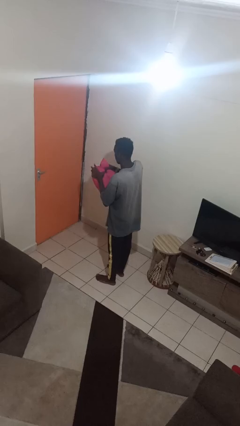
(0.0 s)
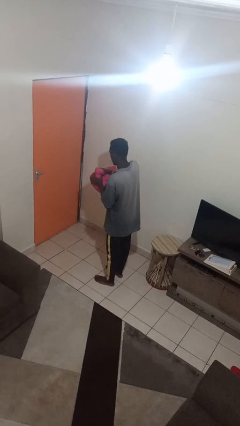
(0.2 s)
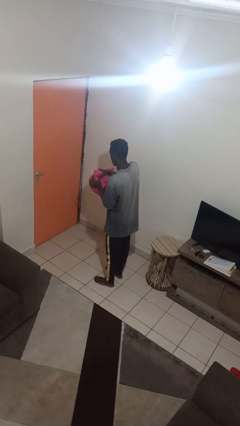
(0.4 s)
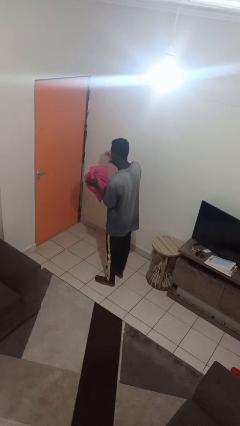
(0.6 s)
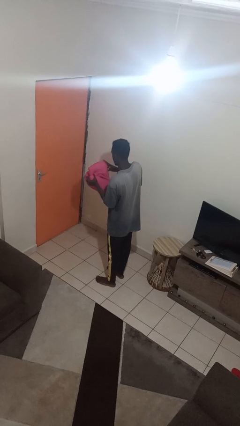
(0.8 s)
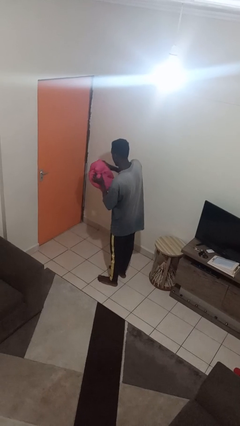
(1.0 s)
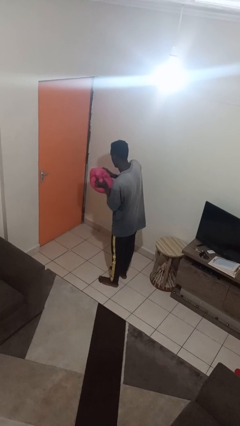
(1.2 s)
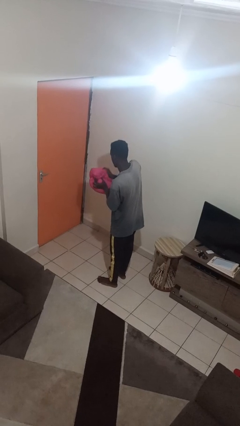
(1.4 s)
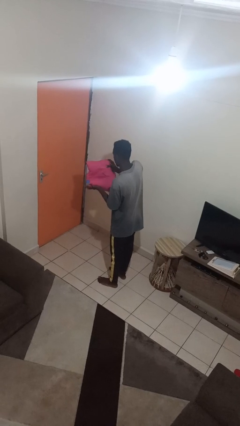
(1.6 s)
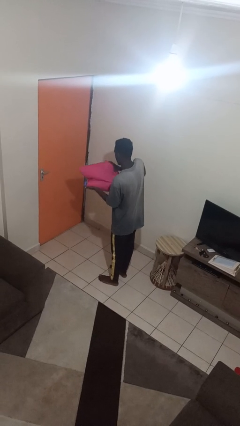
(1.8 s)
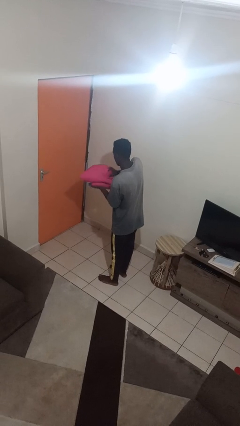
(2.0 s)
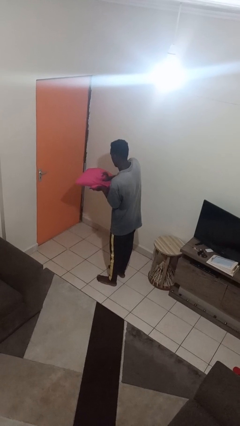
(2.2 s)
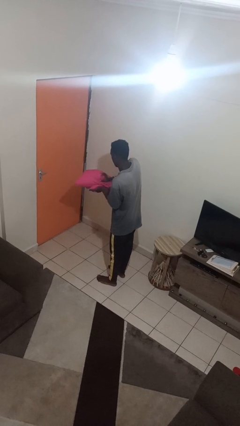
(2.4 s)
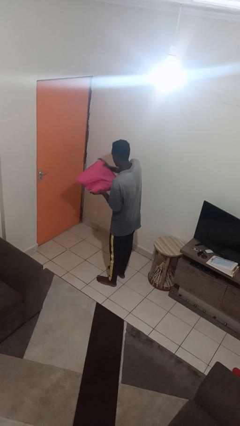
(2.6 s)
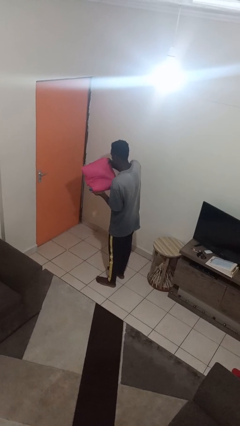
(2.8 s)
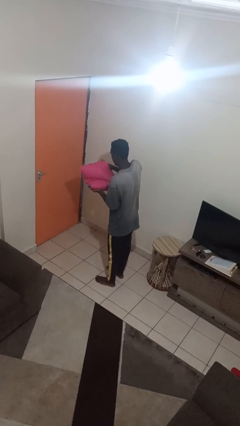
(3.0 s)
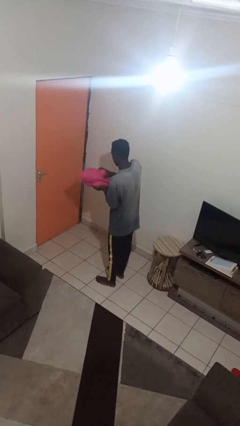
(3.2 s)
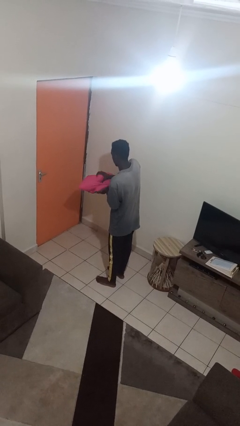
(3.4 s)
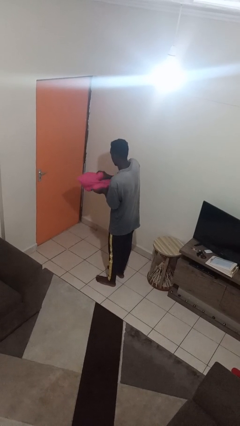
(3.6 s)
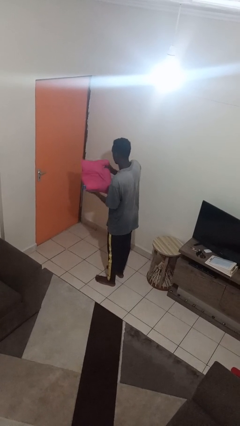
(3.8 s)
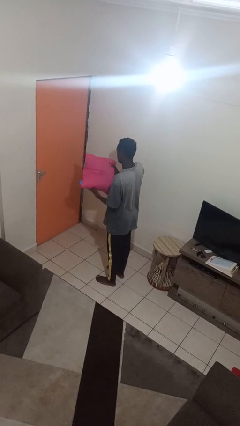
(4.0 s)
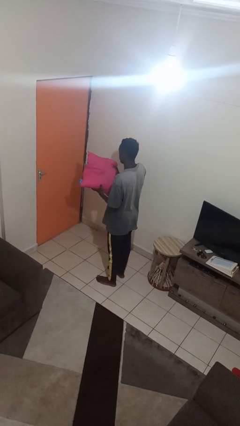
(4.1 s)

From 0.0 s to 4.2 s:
person squeezes object

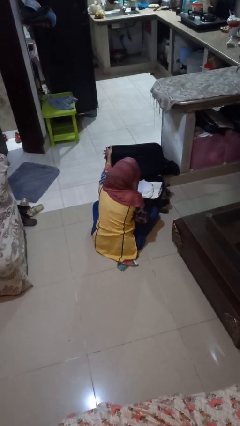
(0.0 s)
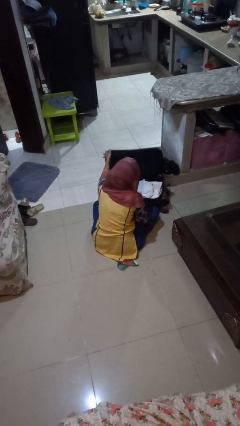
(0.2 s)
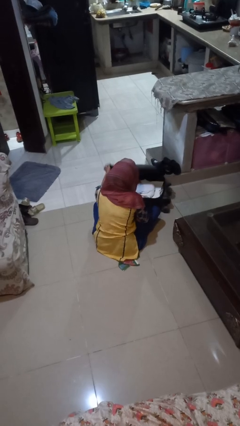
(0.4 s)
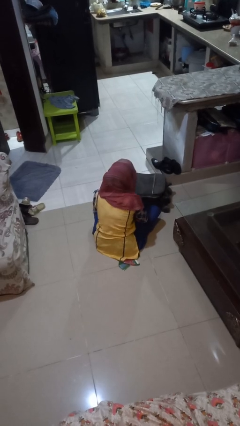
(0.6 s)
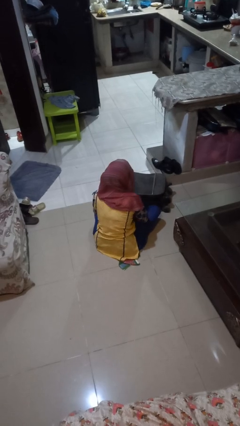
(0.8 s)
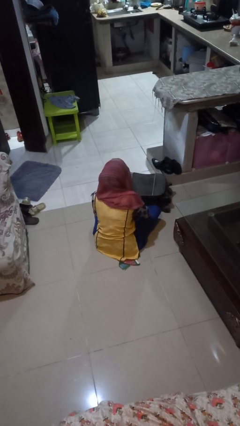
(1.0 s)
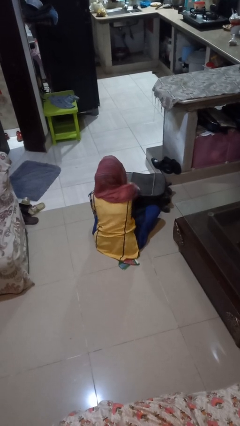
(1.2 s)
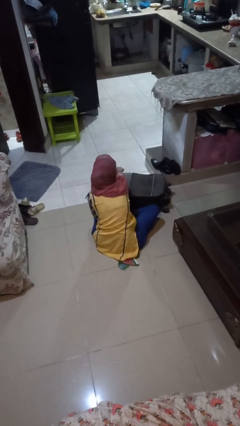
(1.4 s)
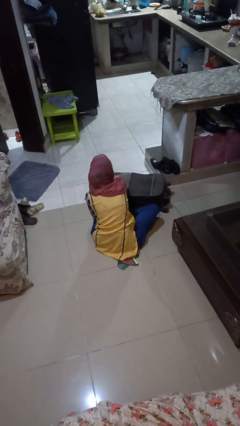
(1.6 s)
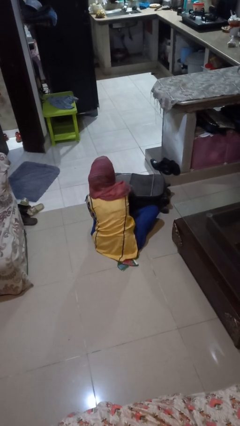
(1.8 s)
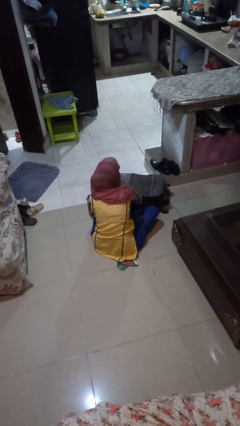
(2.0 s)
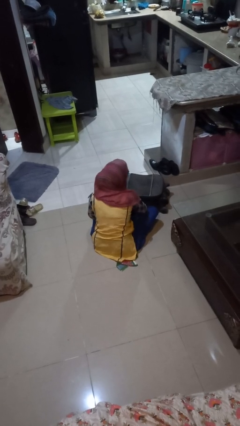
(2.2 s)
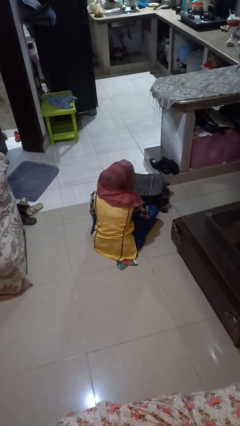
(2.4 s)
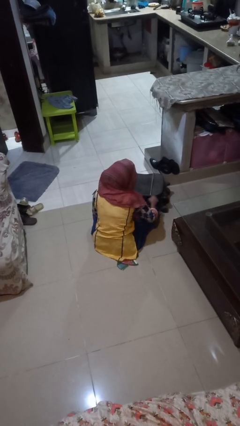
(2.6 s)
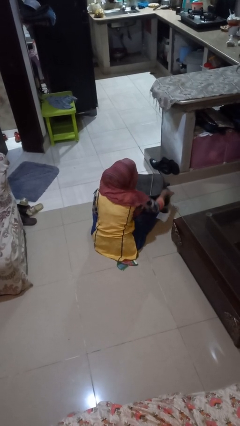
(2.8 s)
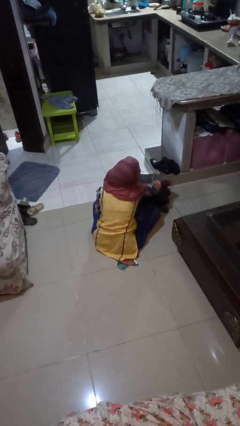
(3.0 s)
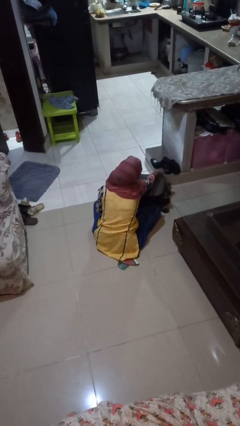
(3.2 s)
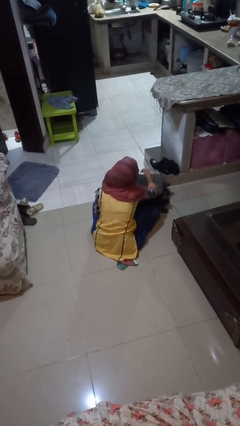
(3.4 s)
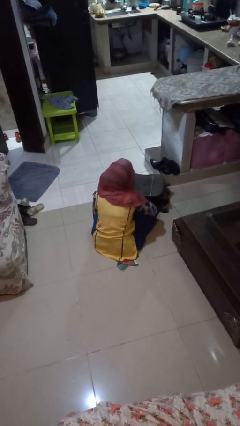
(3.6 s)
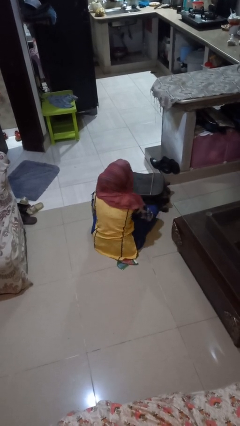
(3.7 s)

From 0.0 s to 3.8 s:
person closes suitcase

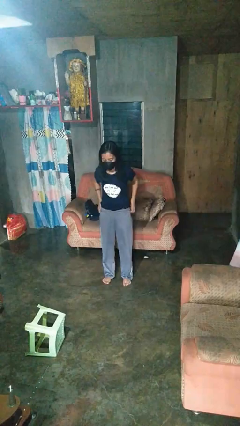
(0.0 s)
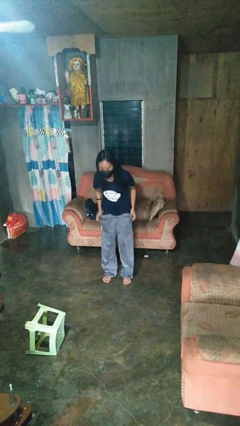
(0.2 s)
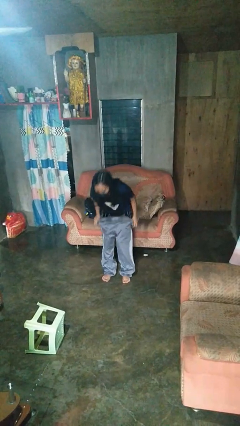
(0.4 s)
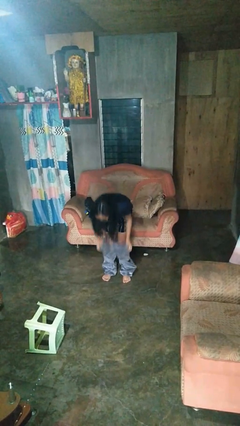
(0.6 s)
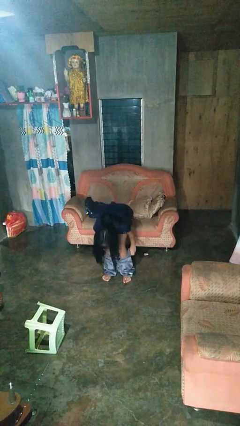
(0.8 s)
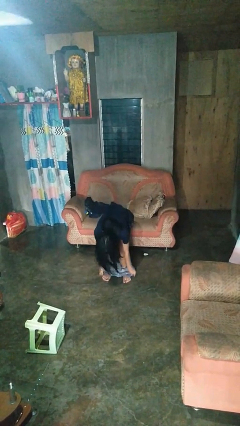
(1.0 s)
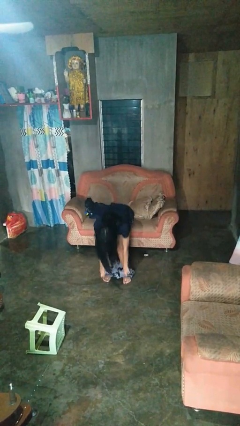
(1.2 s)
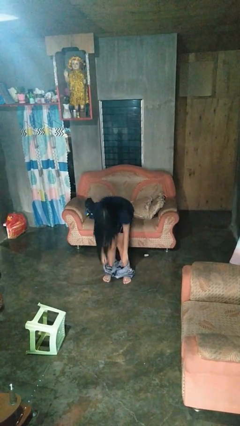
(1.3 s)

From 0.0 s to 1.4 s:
person takes off pants

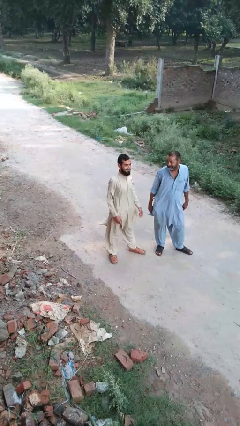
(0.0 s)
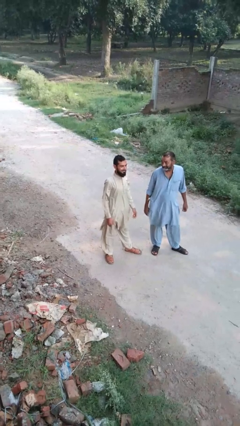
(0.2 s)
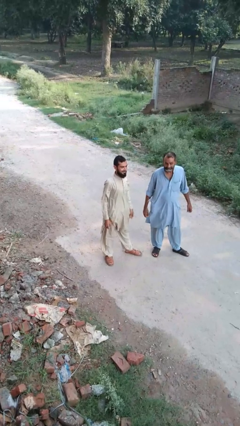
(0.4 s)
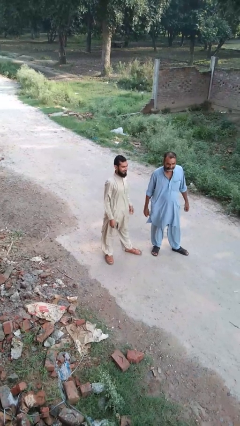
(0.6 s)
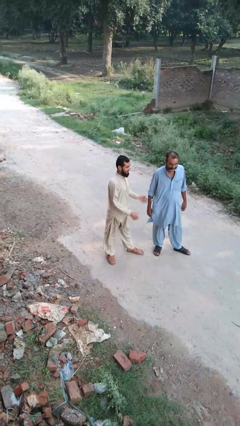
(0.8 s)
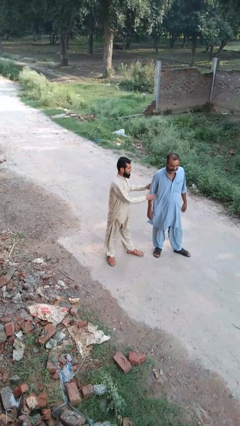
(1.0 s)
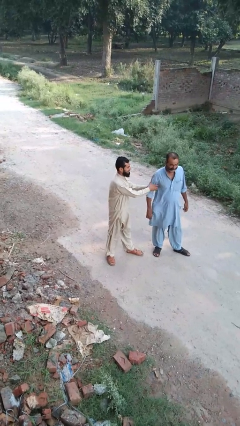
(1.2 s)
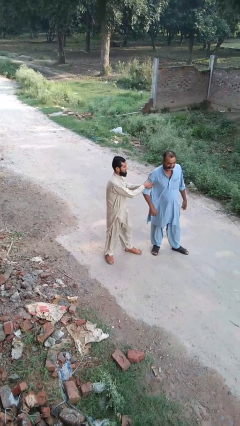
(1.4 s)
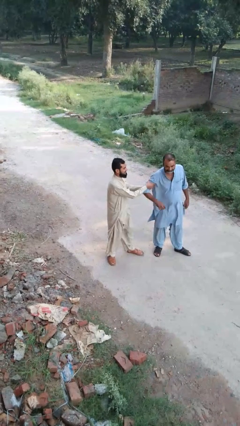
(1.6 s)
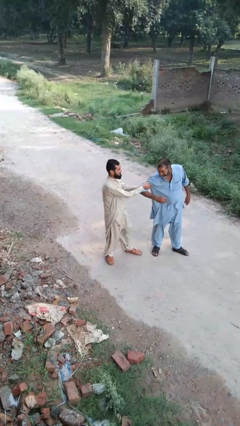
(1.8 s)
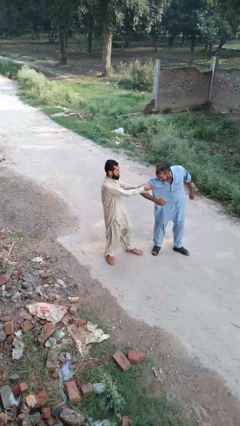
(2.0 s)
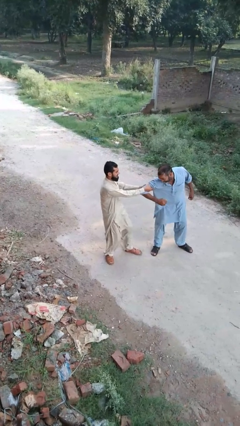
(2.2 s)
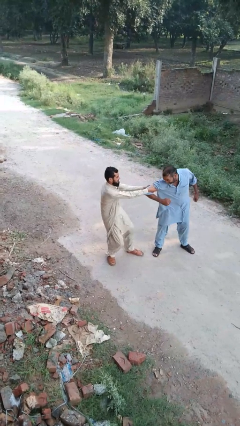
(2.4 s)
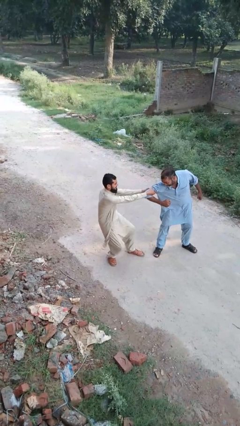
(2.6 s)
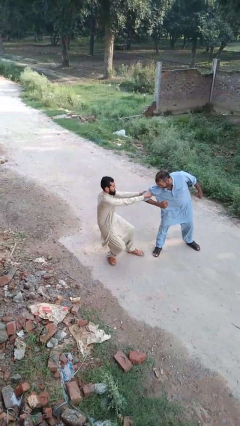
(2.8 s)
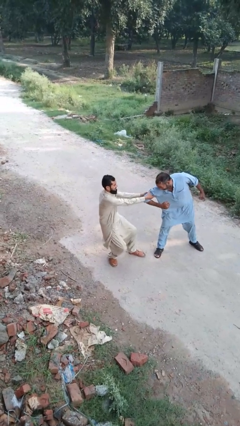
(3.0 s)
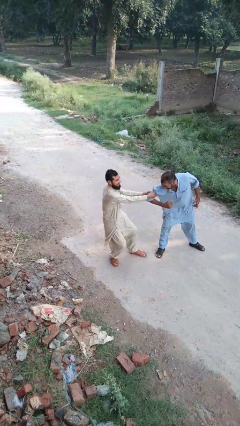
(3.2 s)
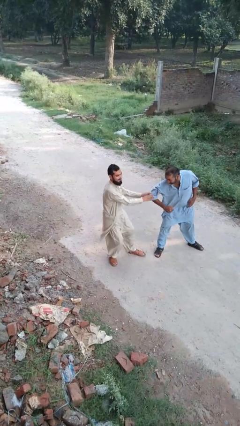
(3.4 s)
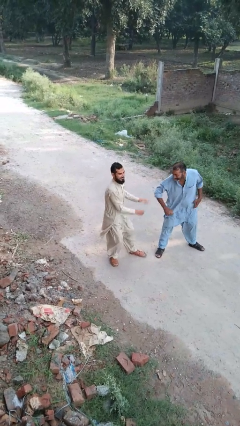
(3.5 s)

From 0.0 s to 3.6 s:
person grabs person by forearm

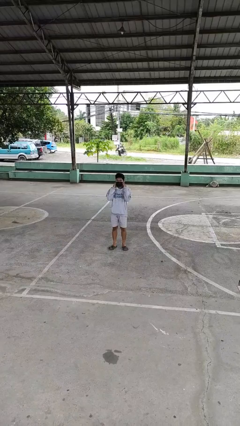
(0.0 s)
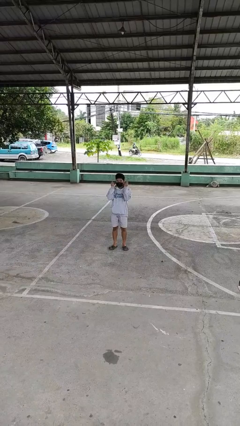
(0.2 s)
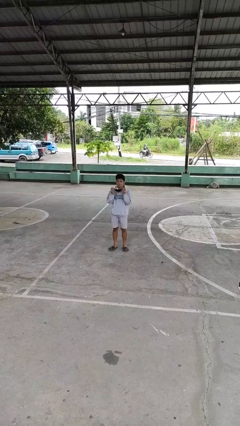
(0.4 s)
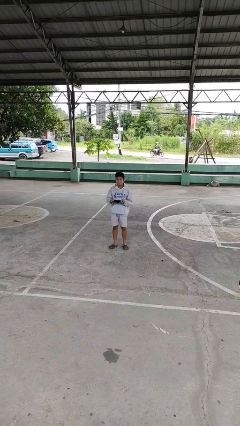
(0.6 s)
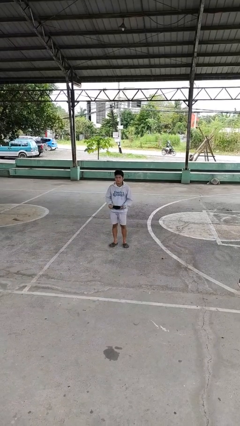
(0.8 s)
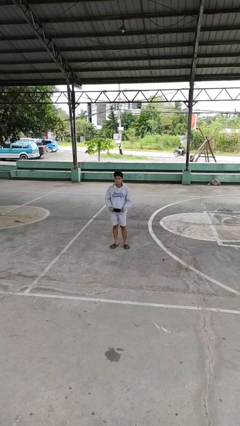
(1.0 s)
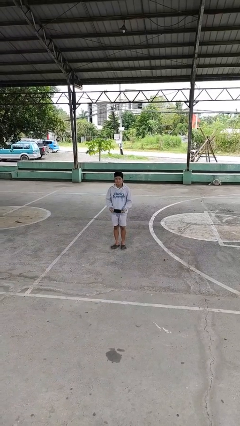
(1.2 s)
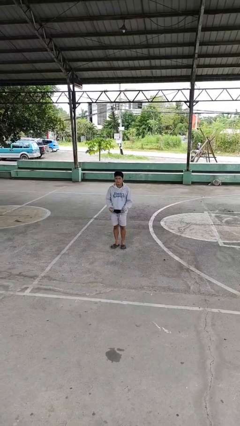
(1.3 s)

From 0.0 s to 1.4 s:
person takes off facemask

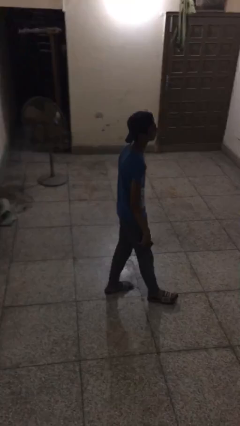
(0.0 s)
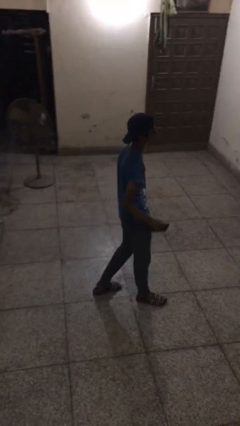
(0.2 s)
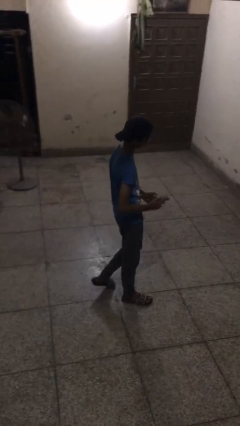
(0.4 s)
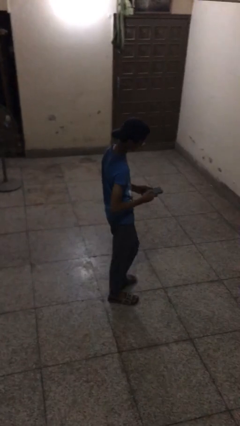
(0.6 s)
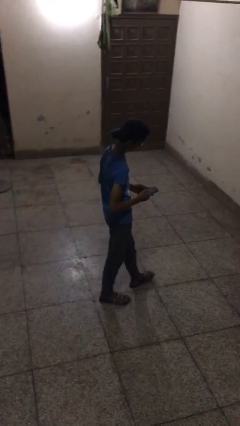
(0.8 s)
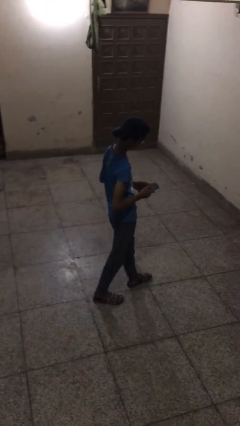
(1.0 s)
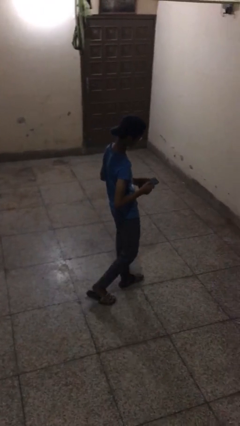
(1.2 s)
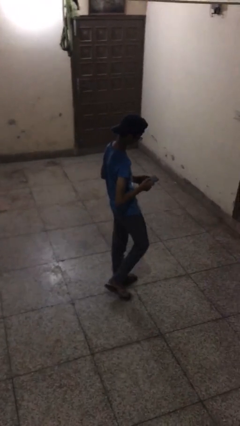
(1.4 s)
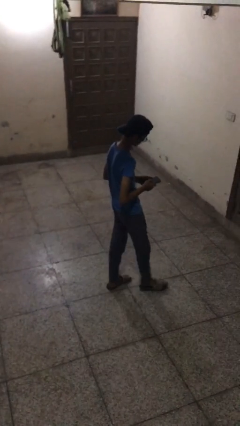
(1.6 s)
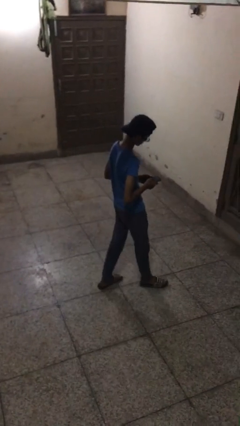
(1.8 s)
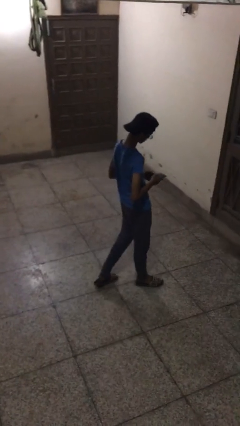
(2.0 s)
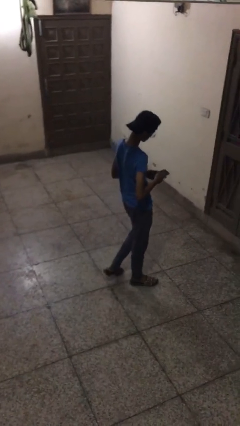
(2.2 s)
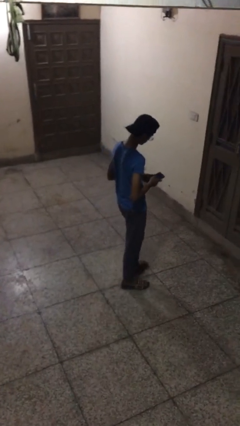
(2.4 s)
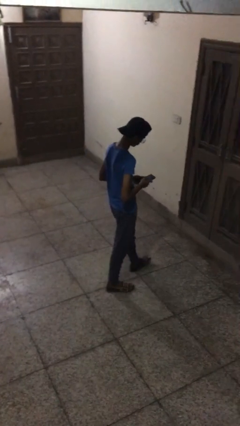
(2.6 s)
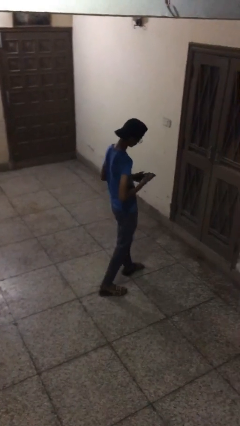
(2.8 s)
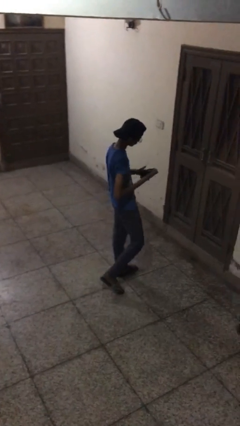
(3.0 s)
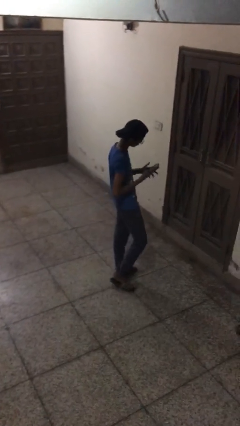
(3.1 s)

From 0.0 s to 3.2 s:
person texts on phone
